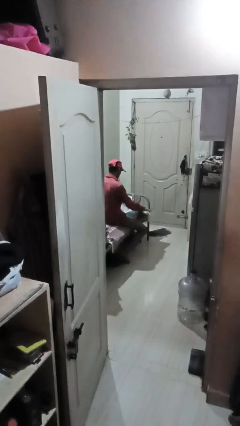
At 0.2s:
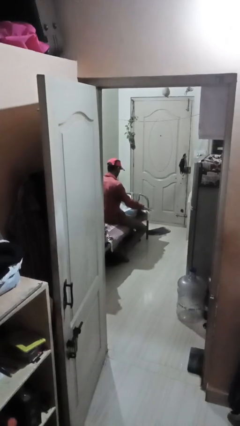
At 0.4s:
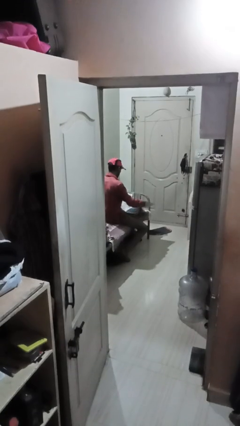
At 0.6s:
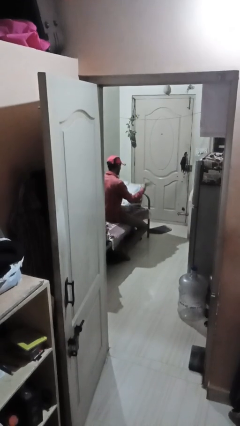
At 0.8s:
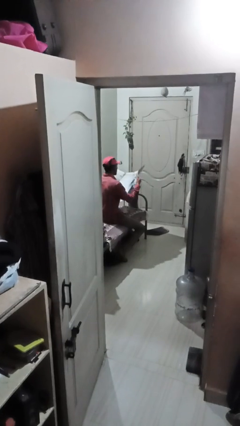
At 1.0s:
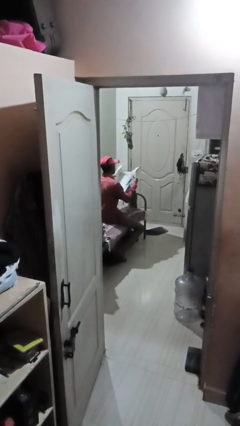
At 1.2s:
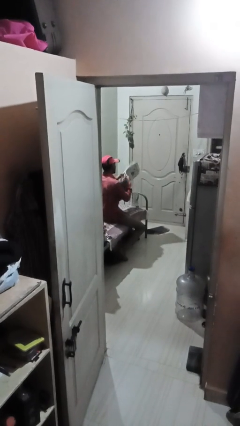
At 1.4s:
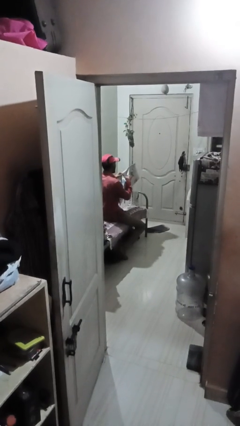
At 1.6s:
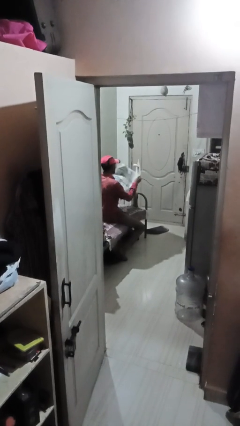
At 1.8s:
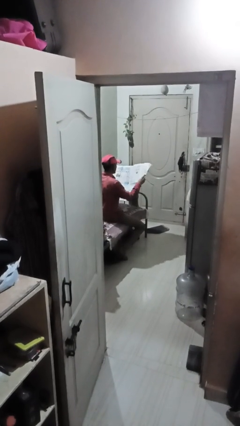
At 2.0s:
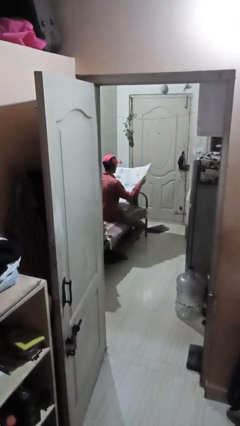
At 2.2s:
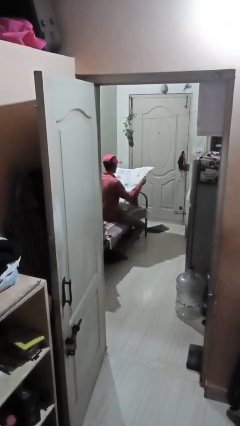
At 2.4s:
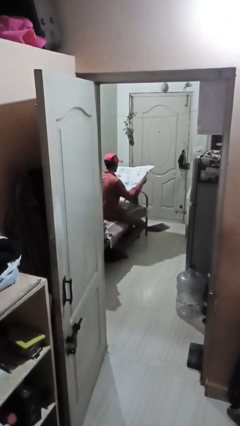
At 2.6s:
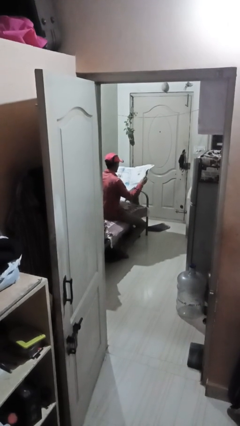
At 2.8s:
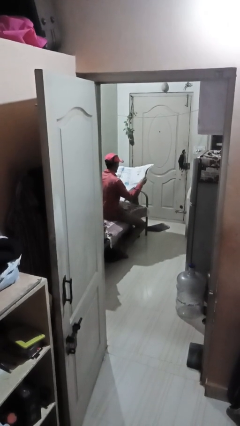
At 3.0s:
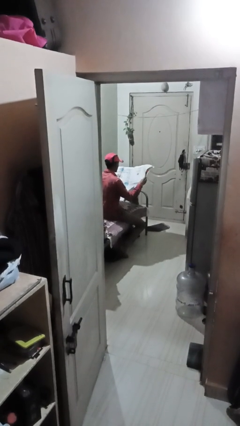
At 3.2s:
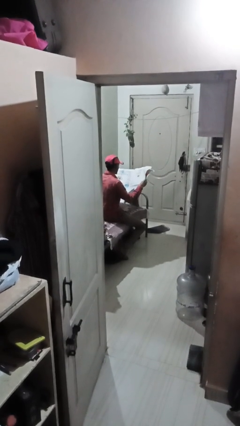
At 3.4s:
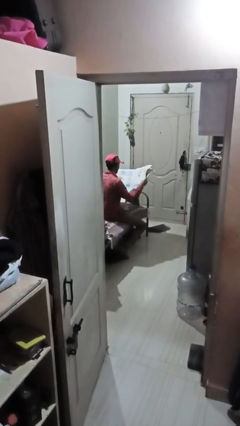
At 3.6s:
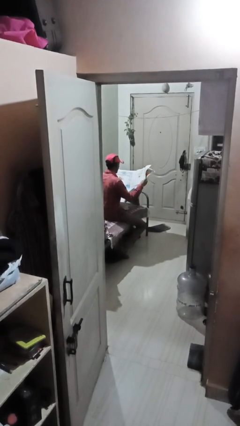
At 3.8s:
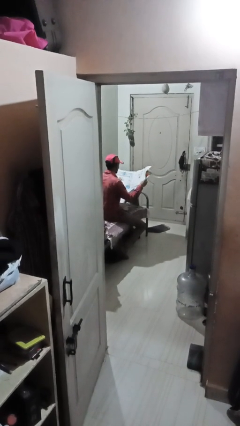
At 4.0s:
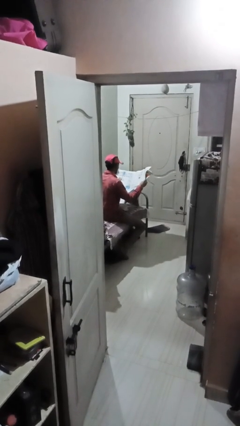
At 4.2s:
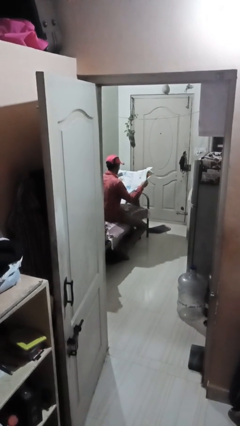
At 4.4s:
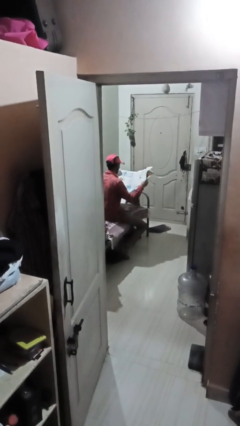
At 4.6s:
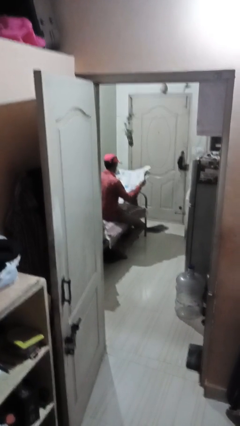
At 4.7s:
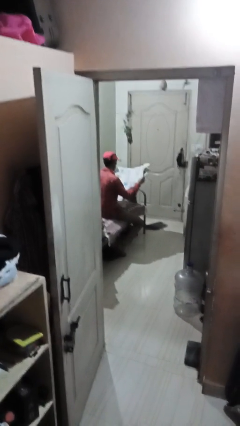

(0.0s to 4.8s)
person reads newspaper

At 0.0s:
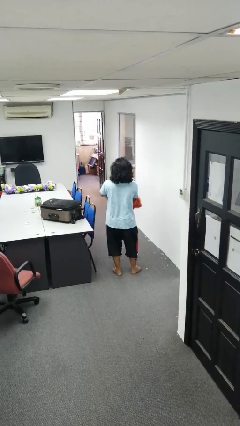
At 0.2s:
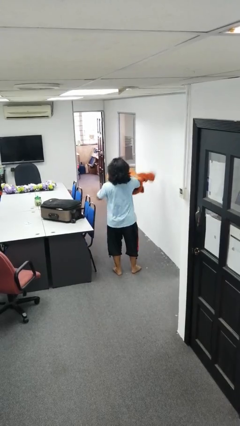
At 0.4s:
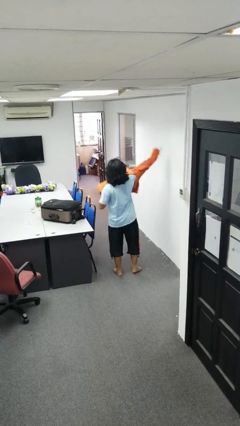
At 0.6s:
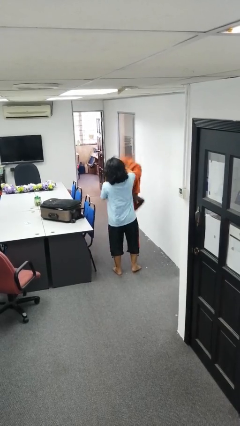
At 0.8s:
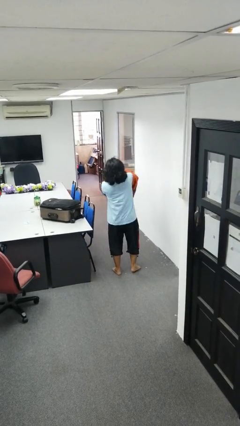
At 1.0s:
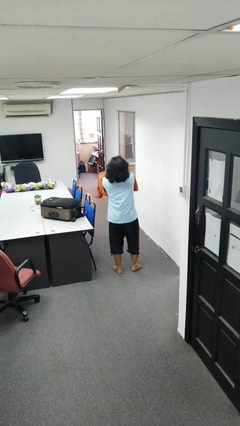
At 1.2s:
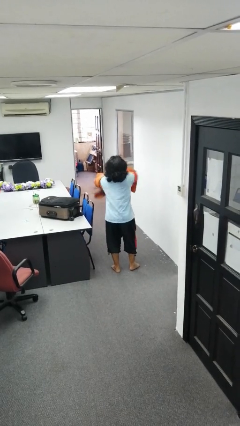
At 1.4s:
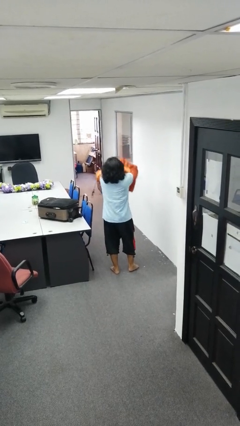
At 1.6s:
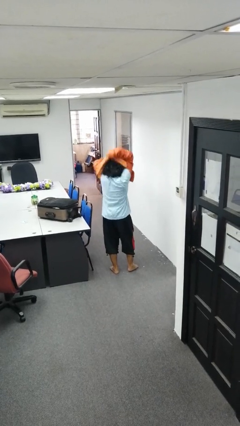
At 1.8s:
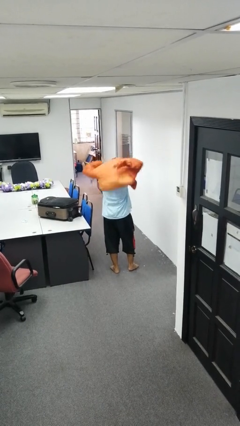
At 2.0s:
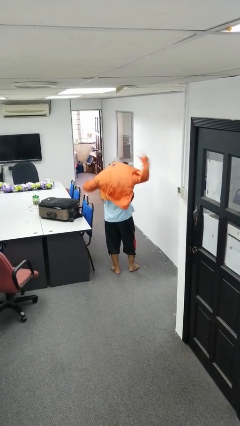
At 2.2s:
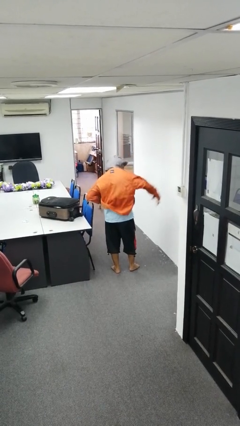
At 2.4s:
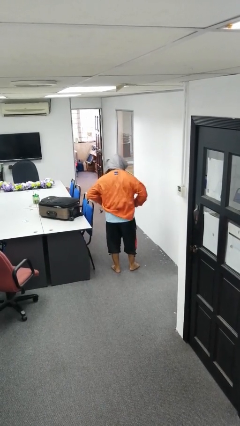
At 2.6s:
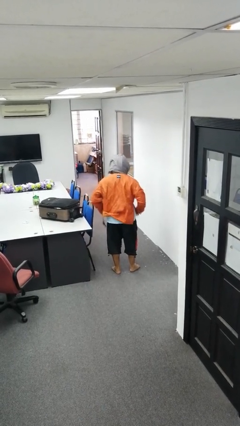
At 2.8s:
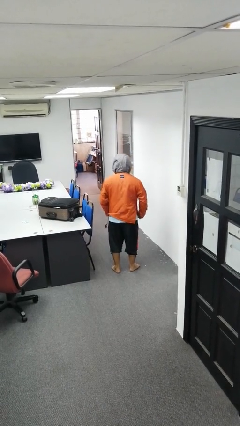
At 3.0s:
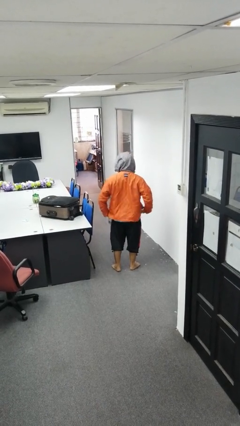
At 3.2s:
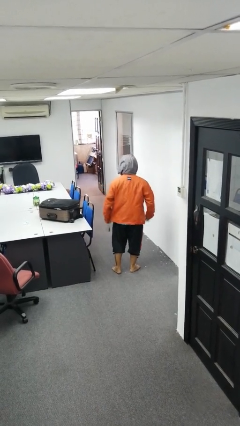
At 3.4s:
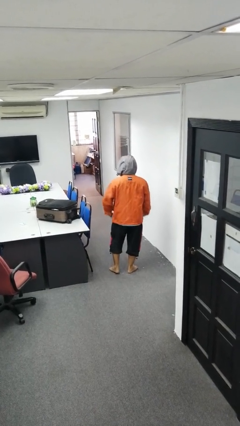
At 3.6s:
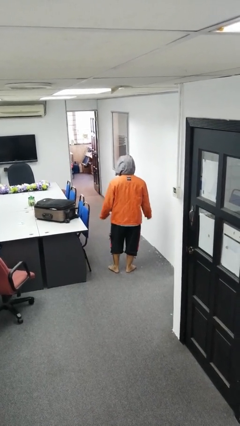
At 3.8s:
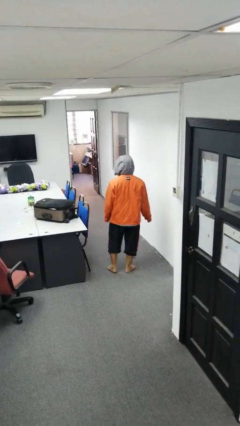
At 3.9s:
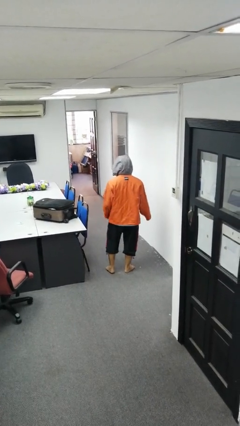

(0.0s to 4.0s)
person puts on hoodie

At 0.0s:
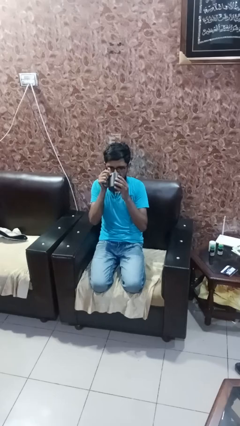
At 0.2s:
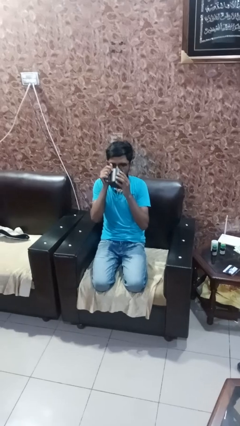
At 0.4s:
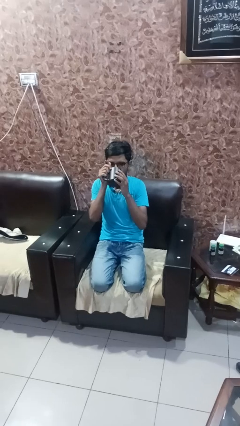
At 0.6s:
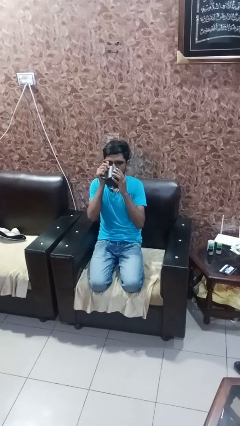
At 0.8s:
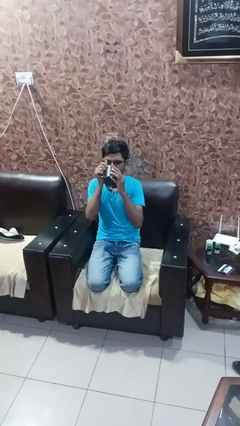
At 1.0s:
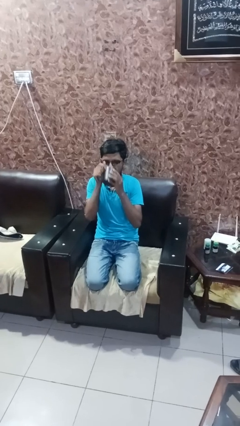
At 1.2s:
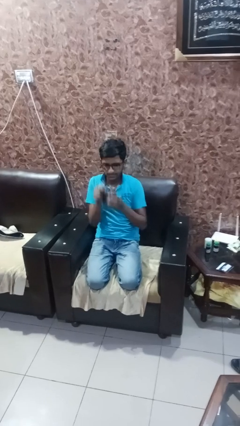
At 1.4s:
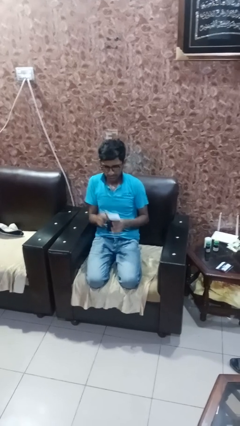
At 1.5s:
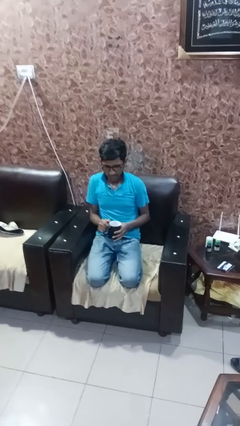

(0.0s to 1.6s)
person drinks from mug

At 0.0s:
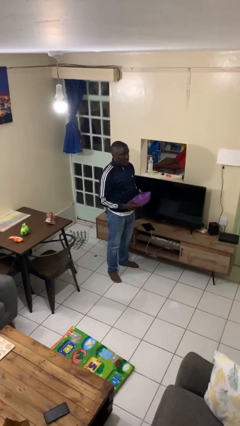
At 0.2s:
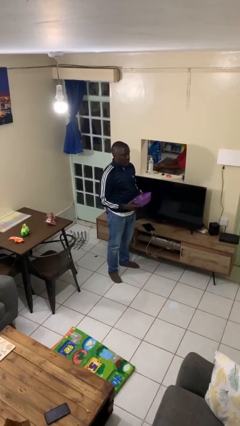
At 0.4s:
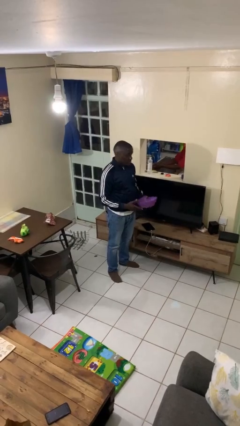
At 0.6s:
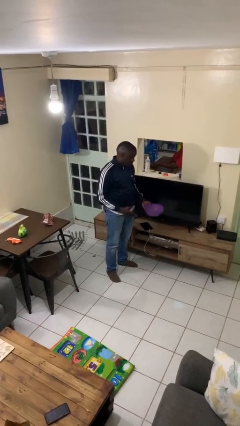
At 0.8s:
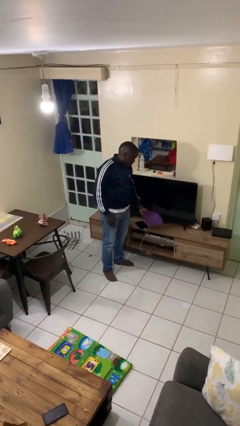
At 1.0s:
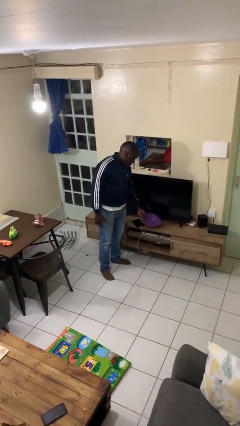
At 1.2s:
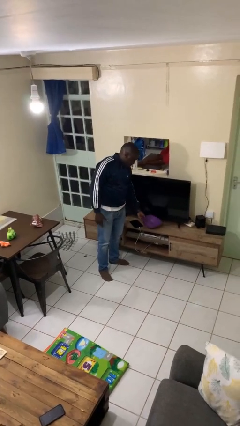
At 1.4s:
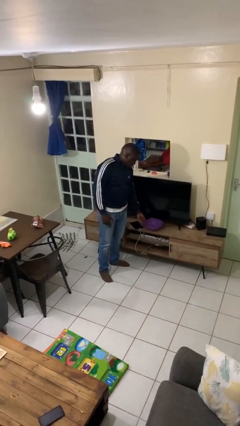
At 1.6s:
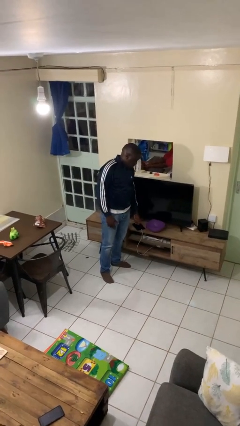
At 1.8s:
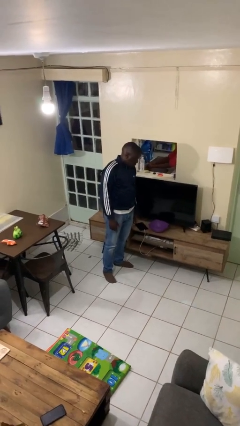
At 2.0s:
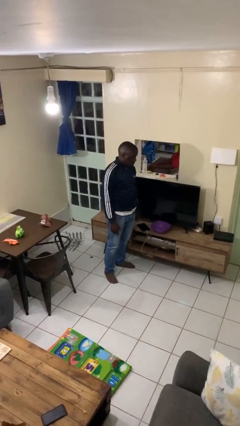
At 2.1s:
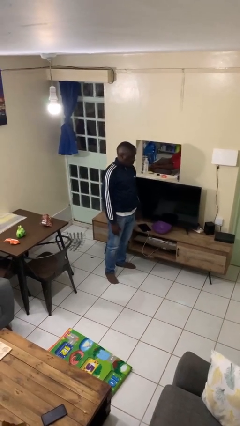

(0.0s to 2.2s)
person puts down object on countertop

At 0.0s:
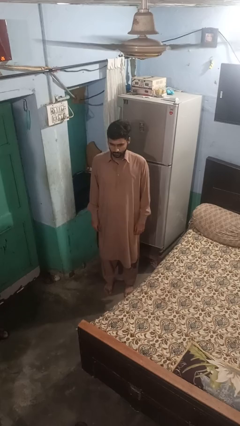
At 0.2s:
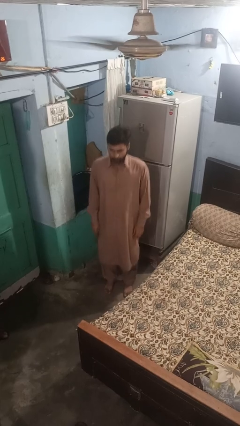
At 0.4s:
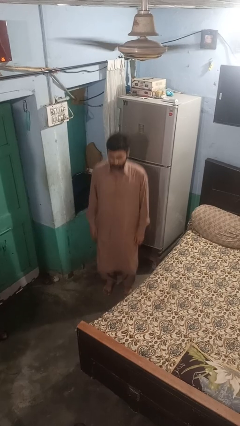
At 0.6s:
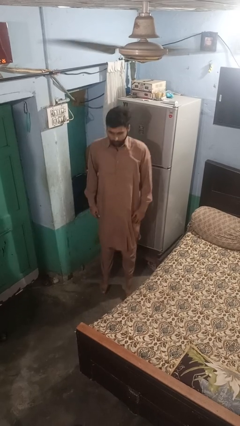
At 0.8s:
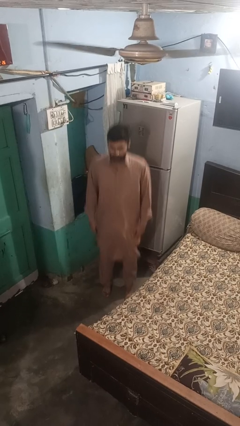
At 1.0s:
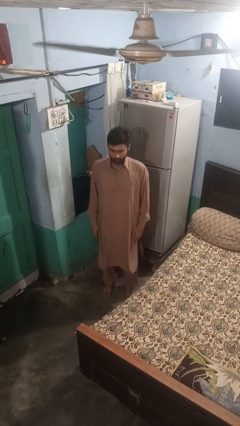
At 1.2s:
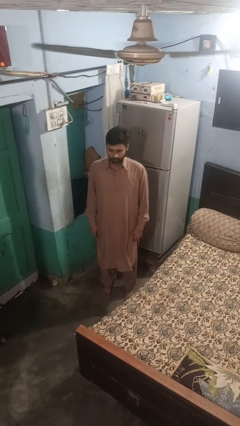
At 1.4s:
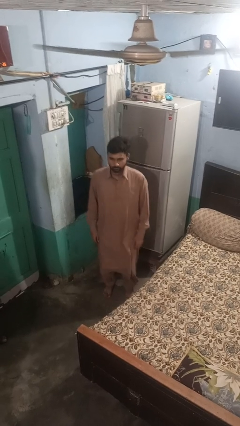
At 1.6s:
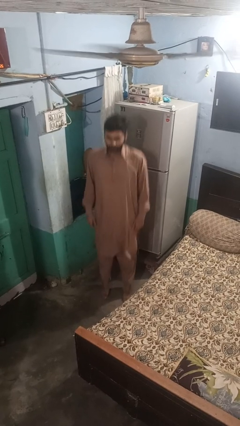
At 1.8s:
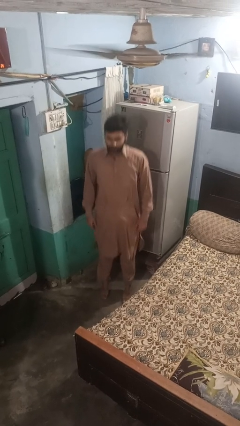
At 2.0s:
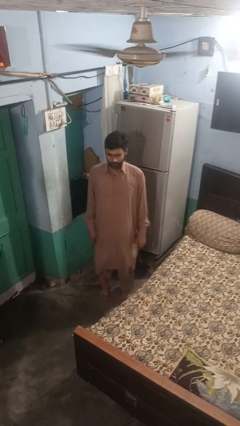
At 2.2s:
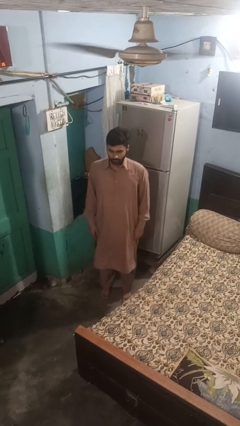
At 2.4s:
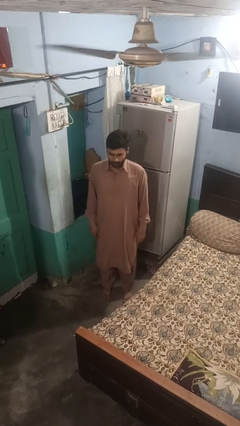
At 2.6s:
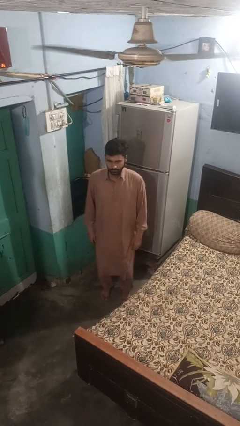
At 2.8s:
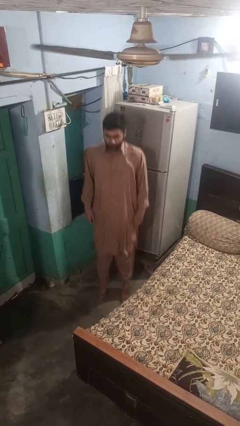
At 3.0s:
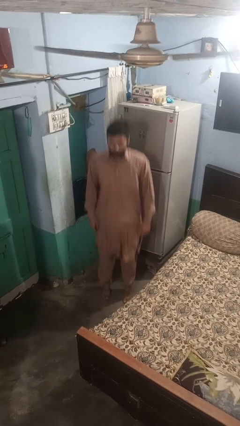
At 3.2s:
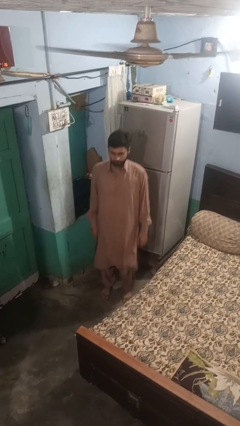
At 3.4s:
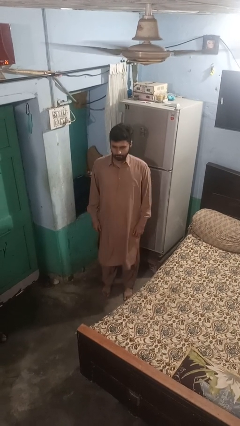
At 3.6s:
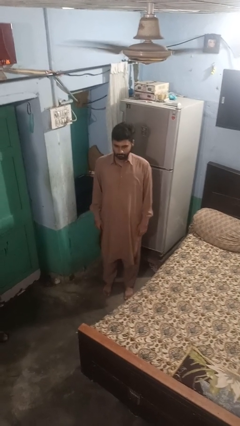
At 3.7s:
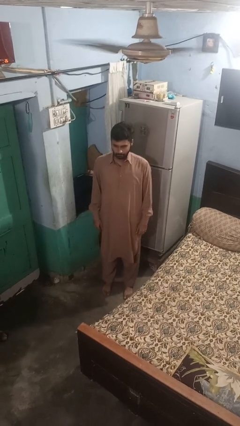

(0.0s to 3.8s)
person jumps

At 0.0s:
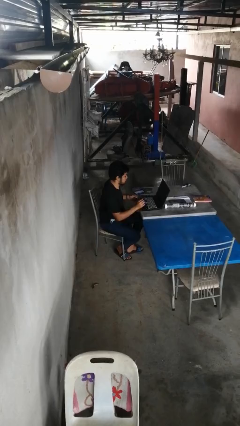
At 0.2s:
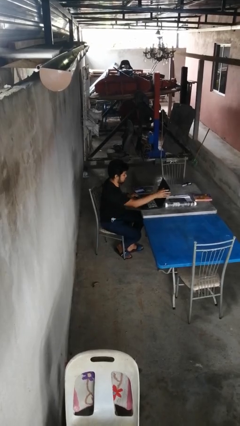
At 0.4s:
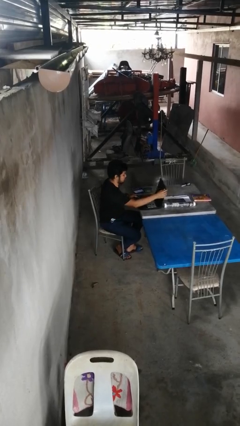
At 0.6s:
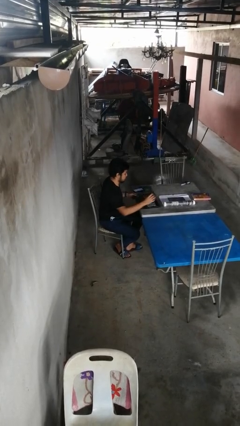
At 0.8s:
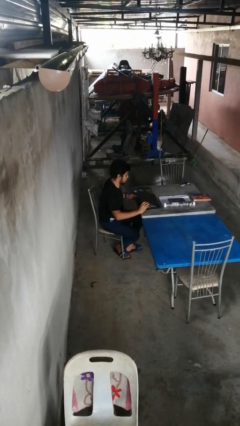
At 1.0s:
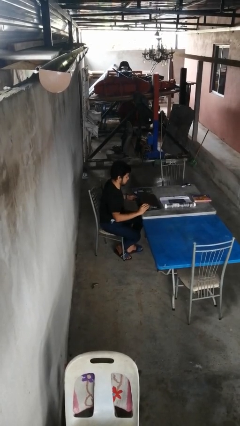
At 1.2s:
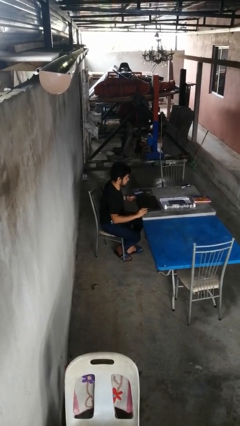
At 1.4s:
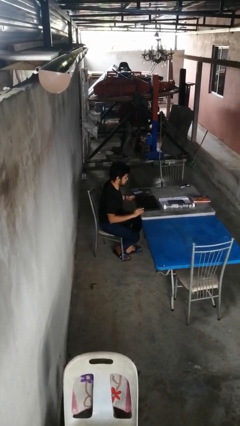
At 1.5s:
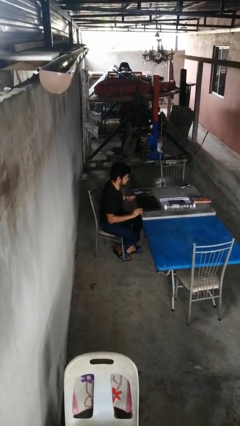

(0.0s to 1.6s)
person closes laptop
